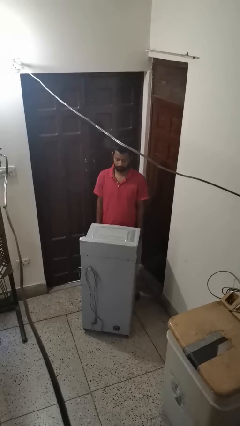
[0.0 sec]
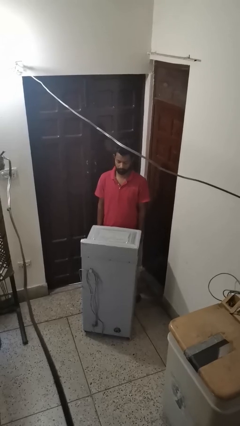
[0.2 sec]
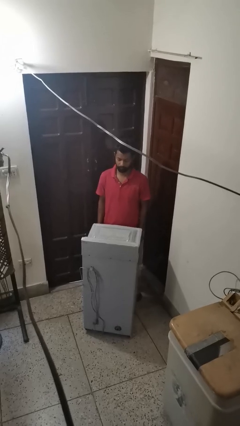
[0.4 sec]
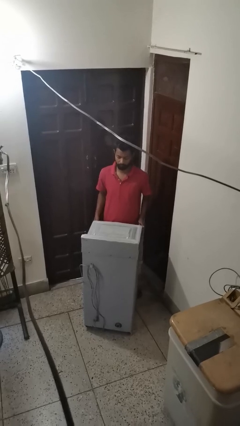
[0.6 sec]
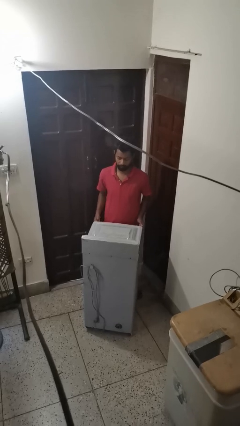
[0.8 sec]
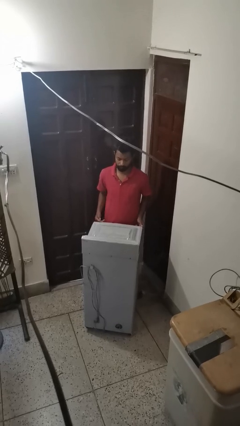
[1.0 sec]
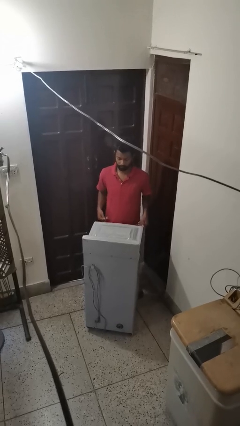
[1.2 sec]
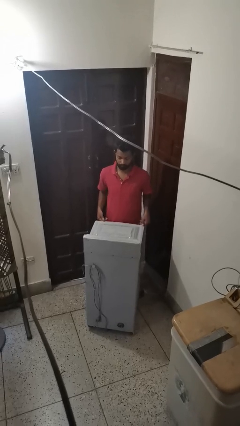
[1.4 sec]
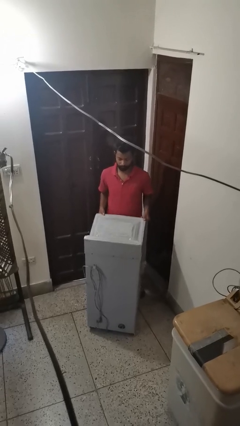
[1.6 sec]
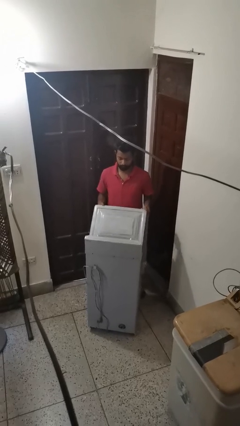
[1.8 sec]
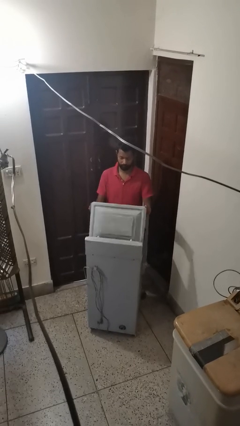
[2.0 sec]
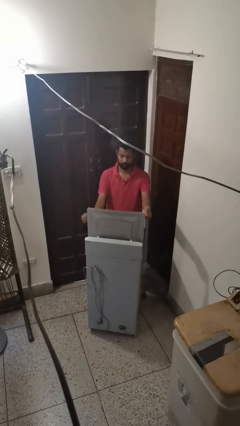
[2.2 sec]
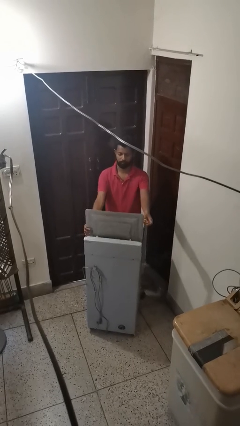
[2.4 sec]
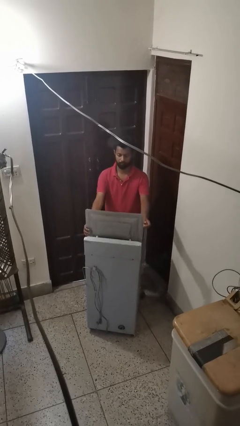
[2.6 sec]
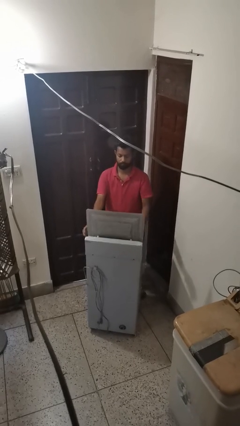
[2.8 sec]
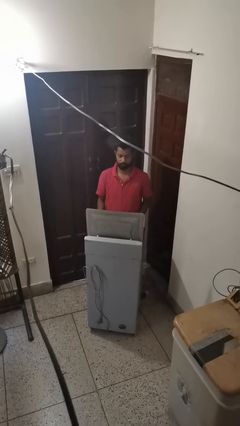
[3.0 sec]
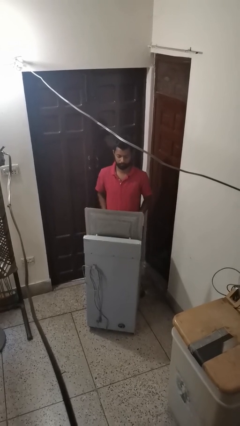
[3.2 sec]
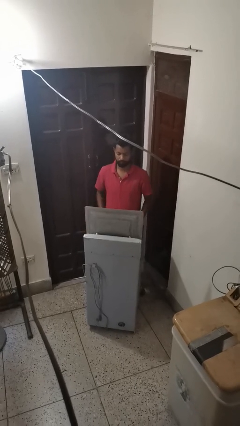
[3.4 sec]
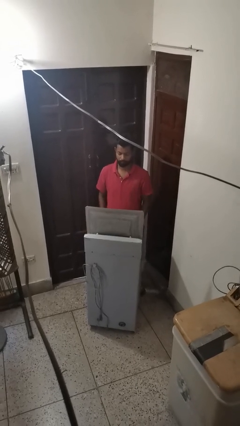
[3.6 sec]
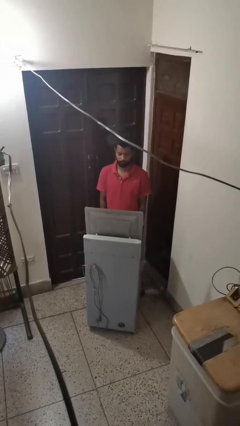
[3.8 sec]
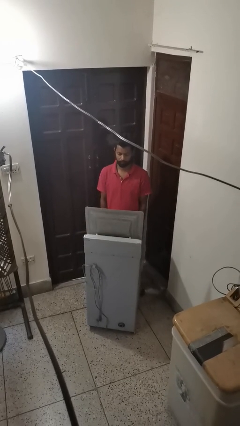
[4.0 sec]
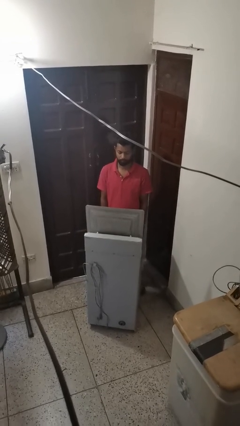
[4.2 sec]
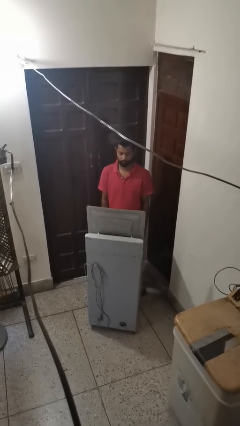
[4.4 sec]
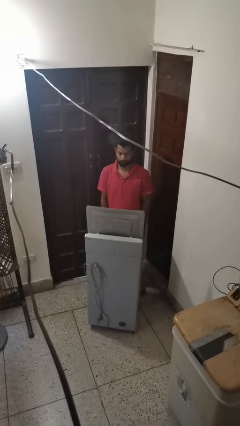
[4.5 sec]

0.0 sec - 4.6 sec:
person opens clothes washer

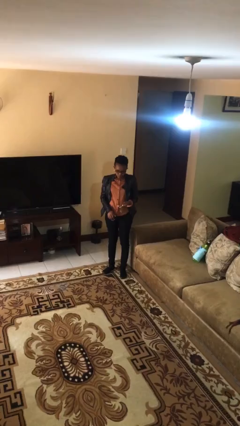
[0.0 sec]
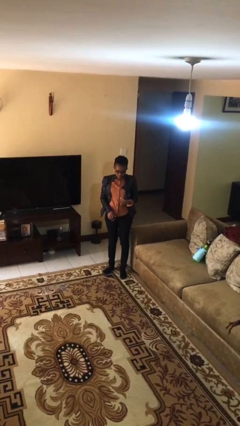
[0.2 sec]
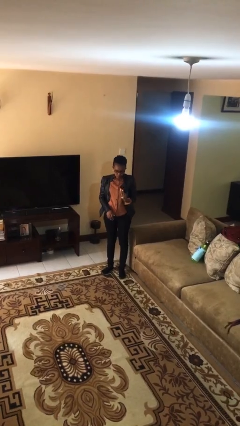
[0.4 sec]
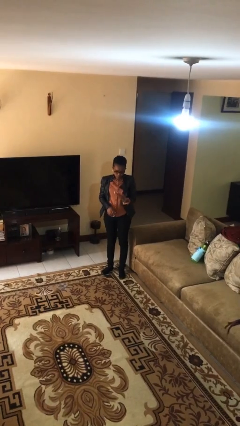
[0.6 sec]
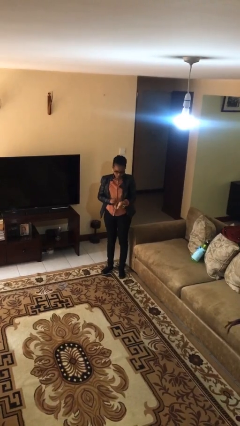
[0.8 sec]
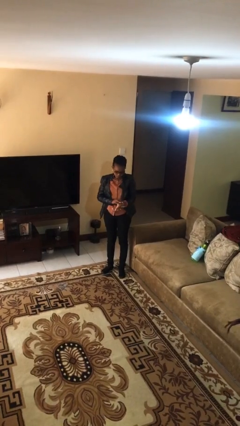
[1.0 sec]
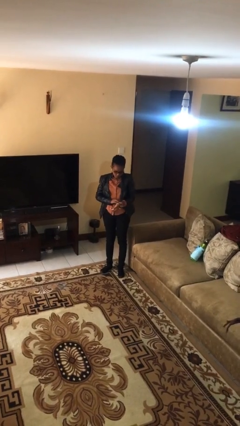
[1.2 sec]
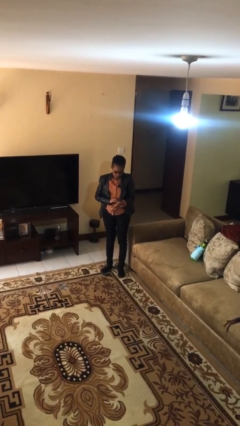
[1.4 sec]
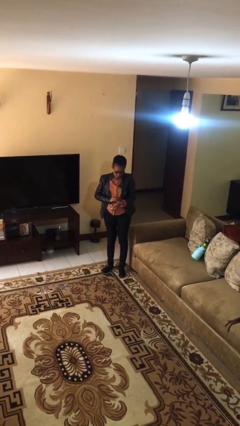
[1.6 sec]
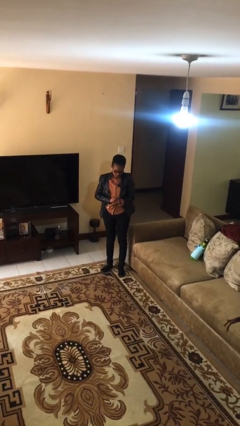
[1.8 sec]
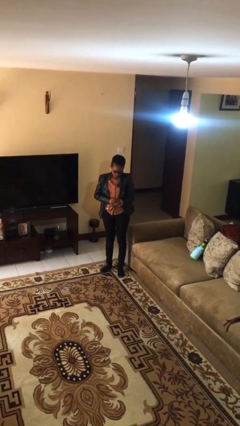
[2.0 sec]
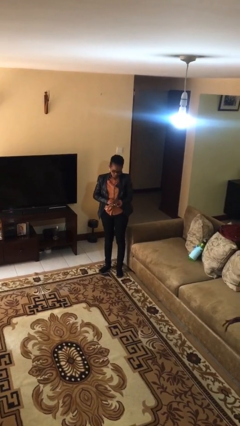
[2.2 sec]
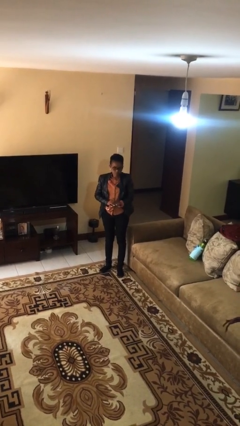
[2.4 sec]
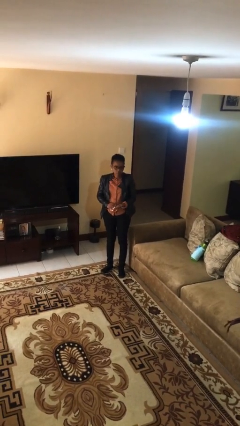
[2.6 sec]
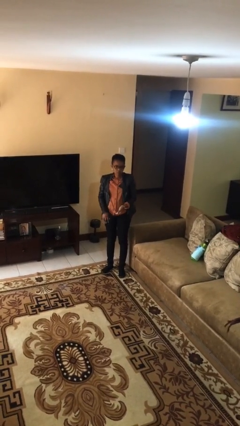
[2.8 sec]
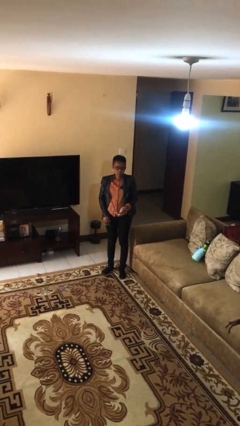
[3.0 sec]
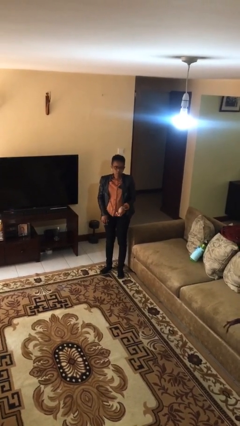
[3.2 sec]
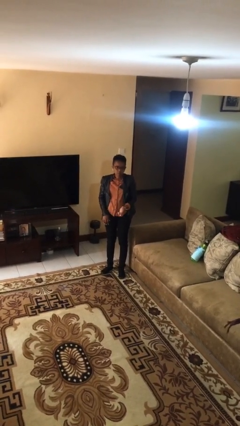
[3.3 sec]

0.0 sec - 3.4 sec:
person puts on wristwatch

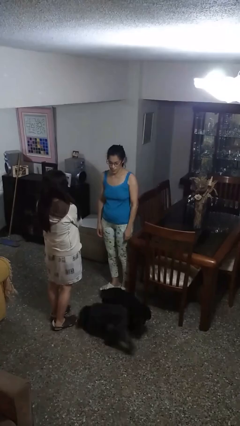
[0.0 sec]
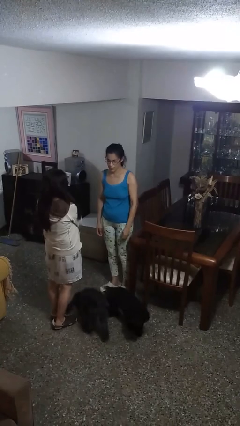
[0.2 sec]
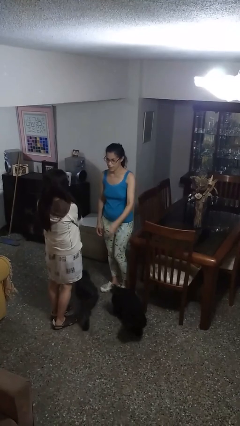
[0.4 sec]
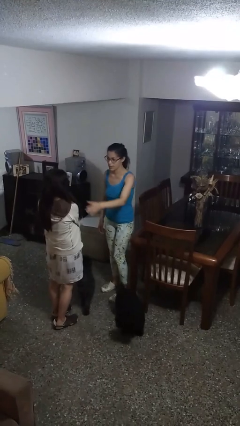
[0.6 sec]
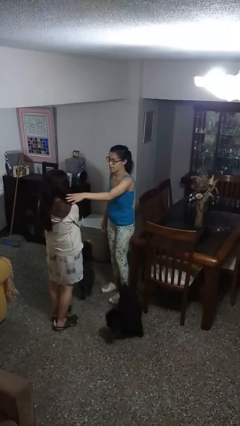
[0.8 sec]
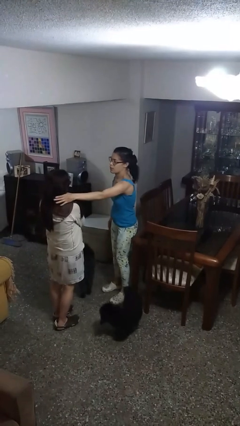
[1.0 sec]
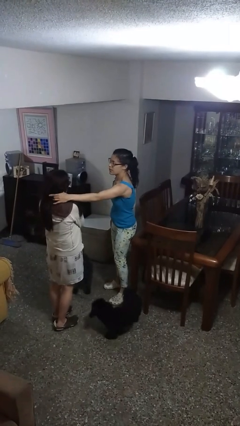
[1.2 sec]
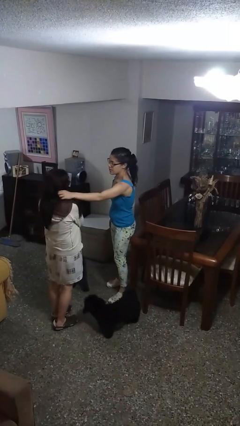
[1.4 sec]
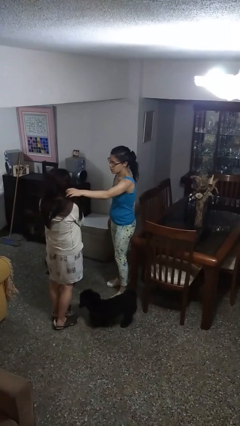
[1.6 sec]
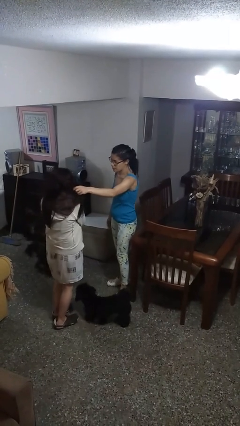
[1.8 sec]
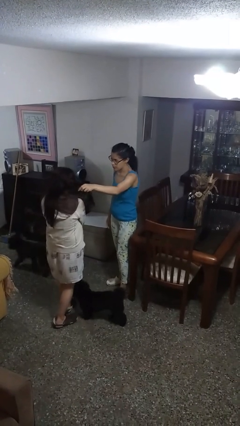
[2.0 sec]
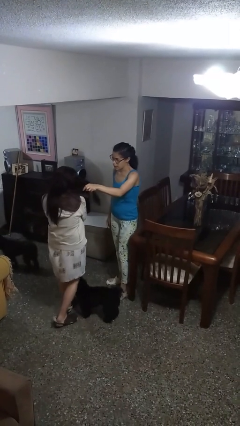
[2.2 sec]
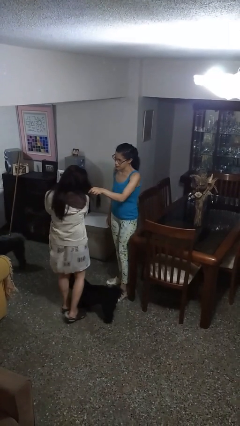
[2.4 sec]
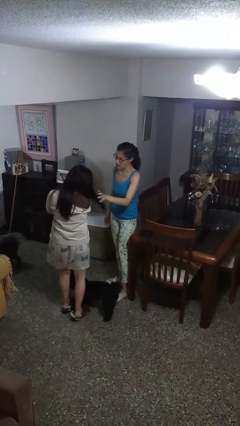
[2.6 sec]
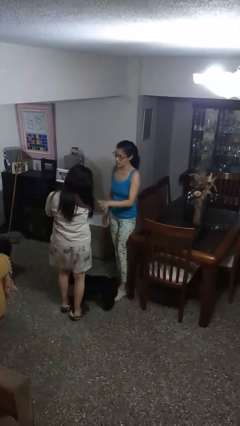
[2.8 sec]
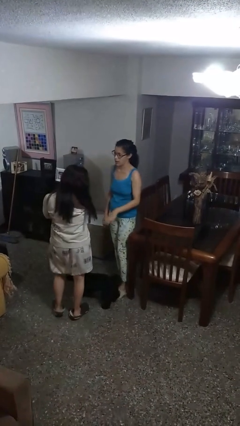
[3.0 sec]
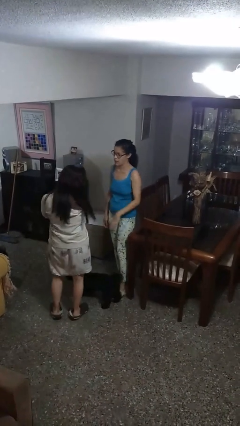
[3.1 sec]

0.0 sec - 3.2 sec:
person grabs person by hair

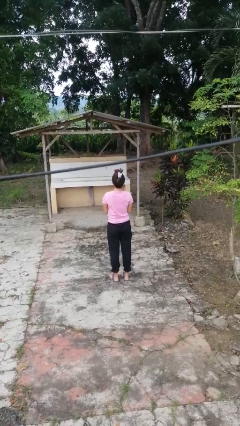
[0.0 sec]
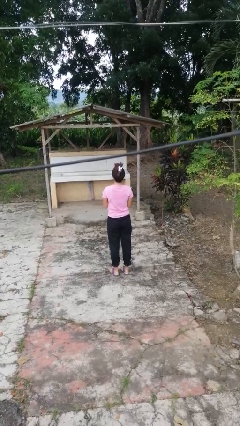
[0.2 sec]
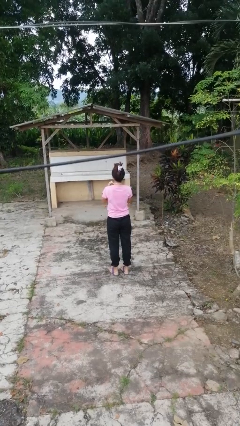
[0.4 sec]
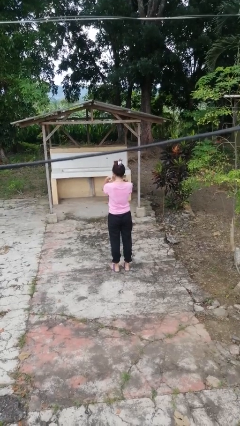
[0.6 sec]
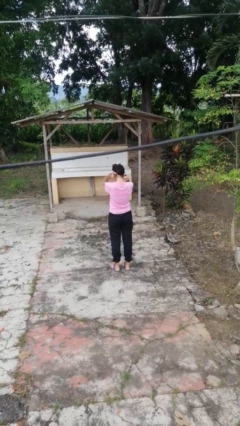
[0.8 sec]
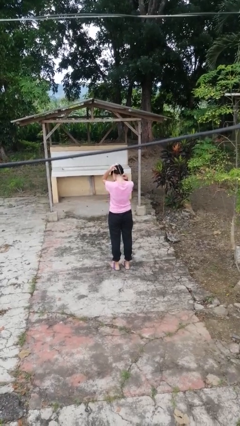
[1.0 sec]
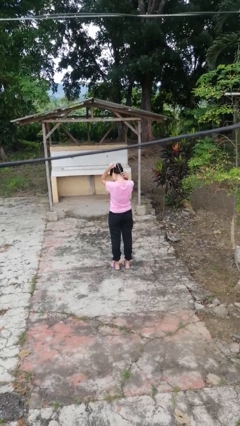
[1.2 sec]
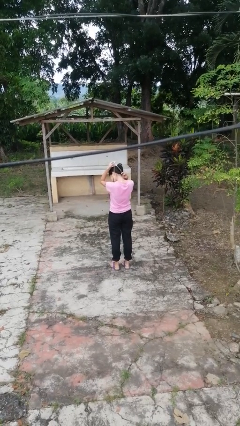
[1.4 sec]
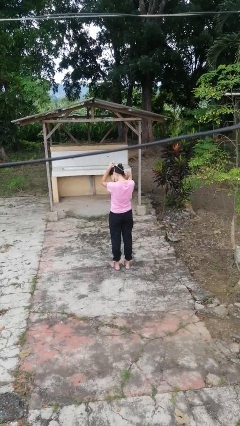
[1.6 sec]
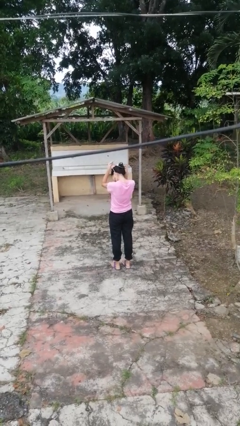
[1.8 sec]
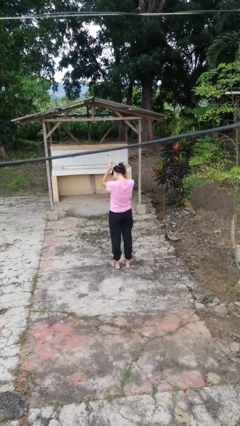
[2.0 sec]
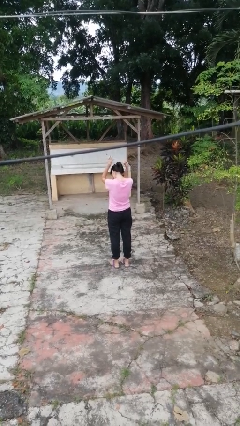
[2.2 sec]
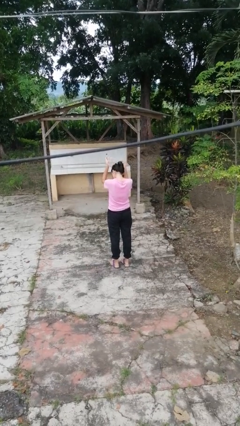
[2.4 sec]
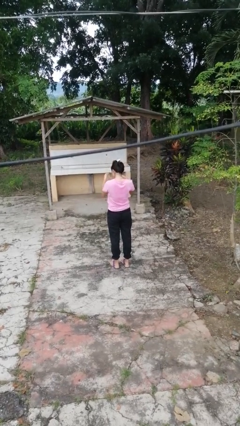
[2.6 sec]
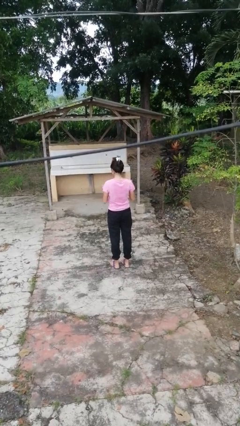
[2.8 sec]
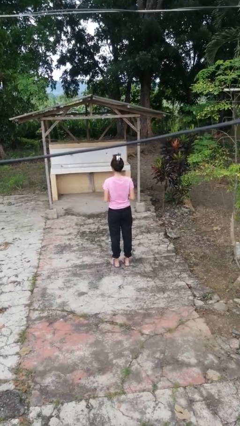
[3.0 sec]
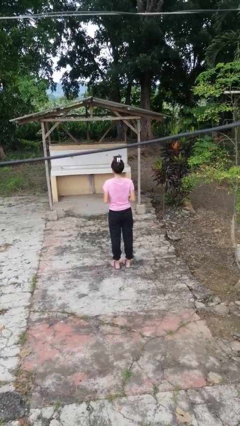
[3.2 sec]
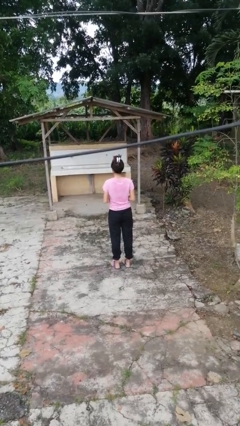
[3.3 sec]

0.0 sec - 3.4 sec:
person takes off necklace

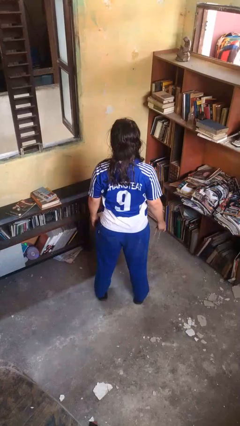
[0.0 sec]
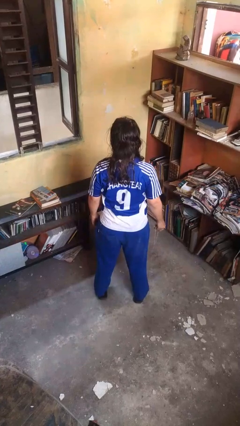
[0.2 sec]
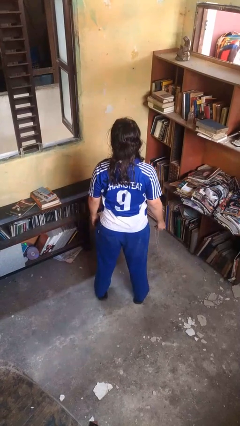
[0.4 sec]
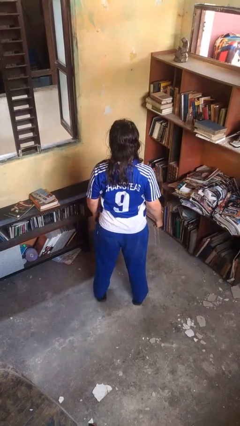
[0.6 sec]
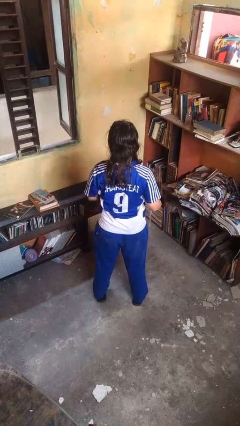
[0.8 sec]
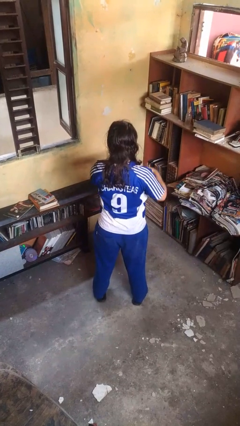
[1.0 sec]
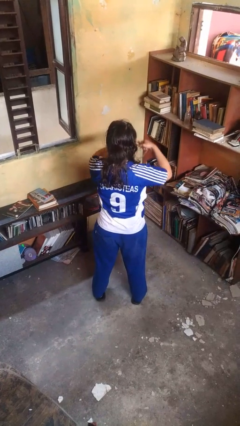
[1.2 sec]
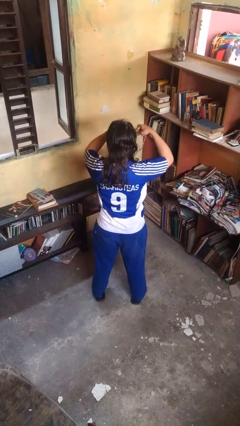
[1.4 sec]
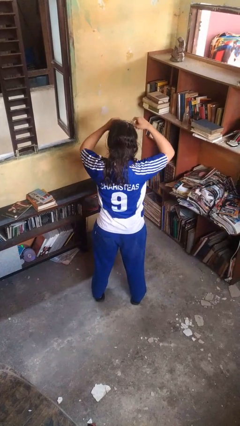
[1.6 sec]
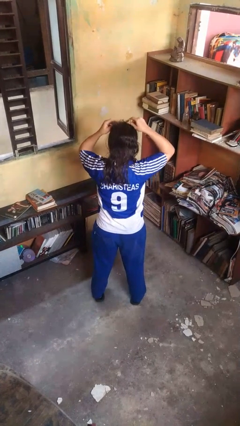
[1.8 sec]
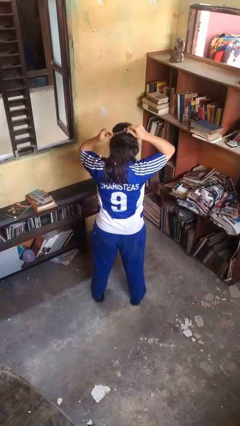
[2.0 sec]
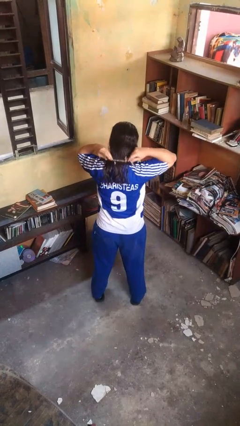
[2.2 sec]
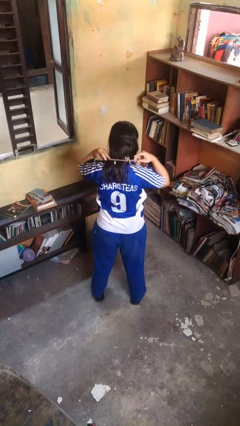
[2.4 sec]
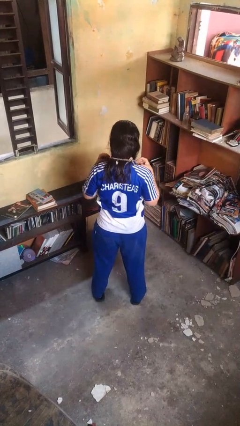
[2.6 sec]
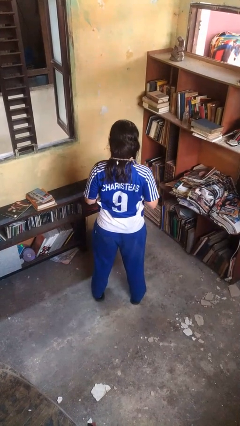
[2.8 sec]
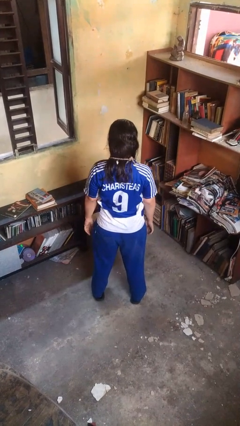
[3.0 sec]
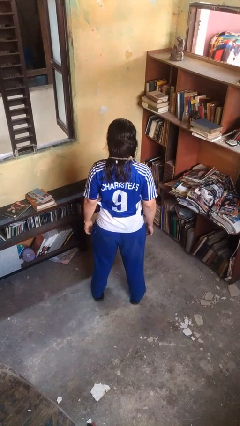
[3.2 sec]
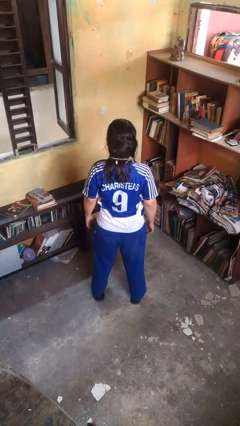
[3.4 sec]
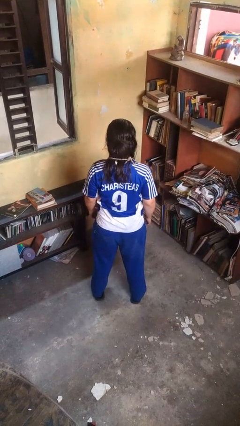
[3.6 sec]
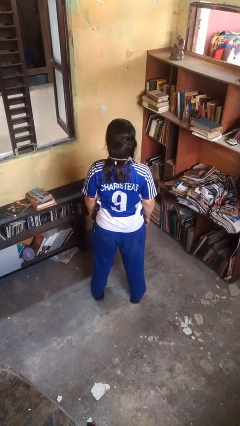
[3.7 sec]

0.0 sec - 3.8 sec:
person puts on necklace
